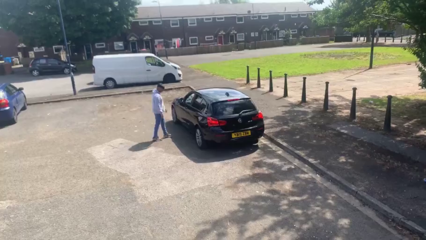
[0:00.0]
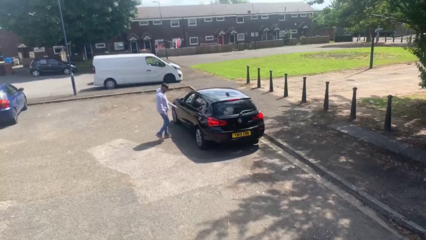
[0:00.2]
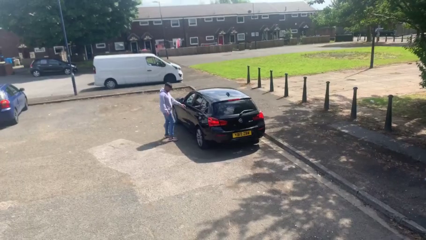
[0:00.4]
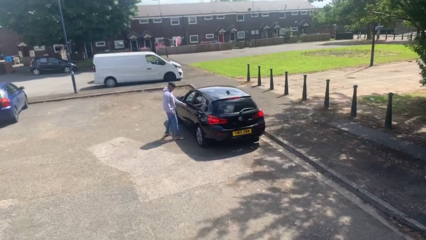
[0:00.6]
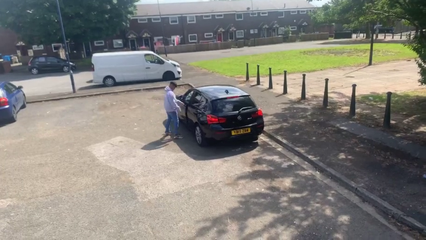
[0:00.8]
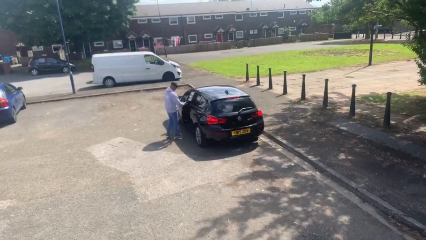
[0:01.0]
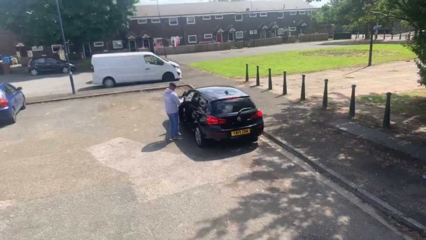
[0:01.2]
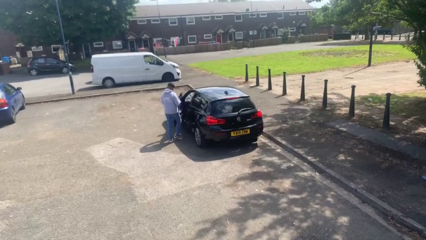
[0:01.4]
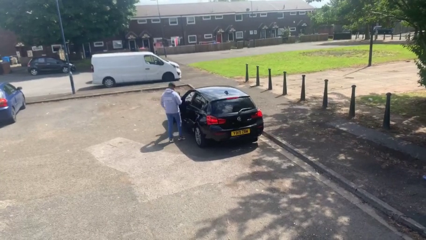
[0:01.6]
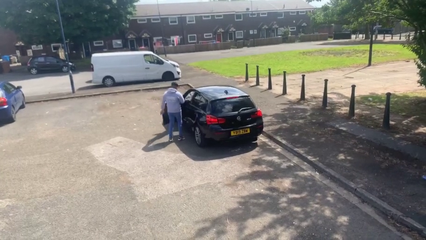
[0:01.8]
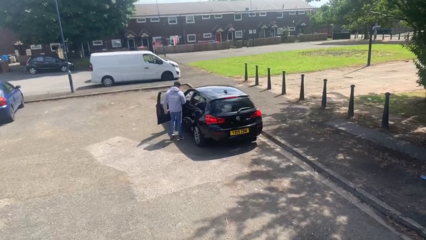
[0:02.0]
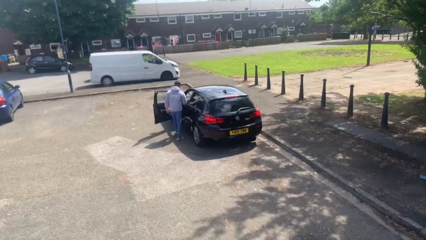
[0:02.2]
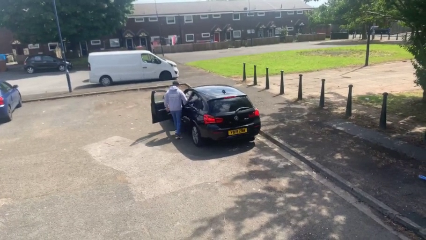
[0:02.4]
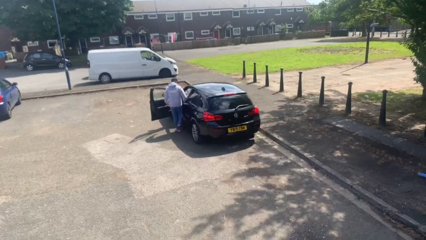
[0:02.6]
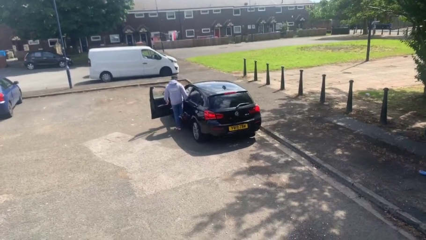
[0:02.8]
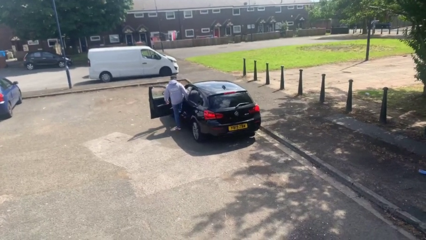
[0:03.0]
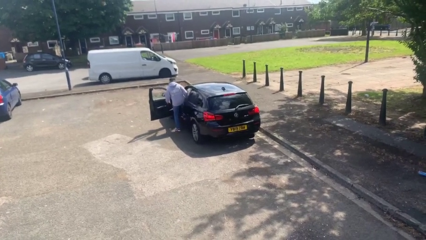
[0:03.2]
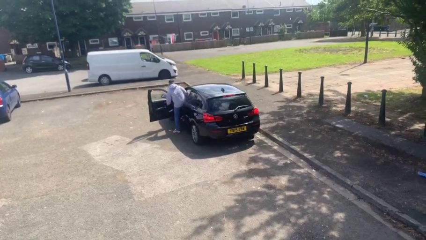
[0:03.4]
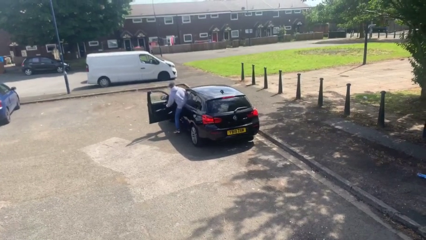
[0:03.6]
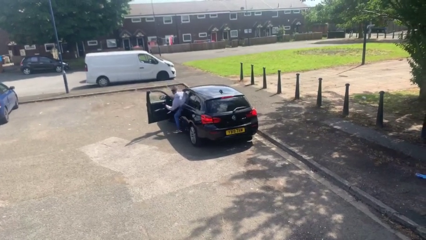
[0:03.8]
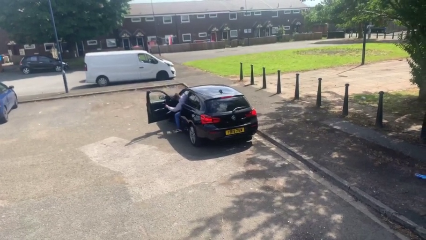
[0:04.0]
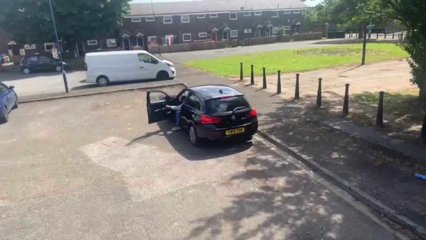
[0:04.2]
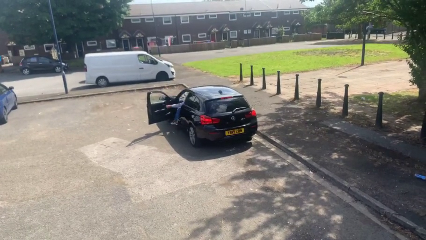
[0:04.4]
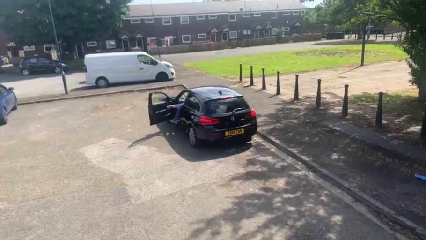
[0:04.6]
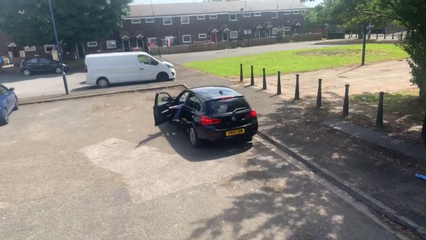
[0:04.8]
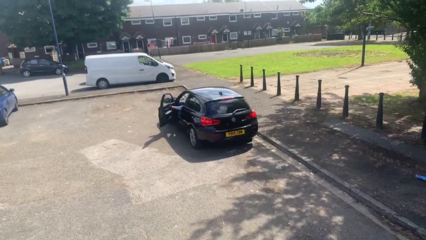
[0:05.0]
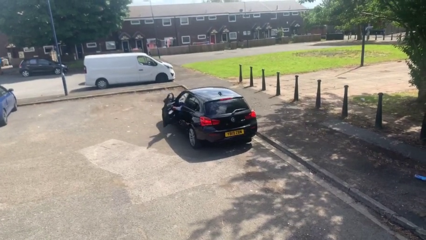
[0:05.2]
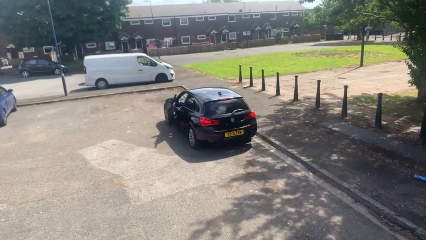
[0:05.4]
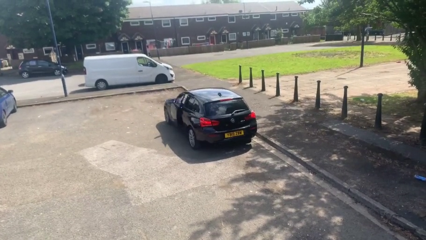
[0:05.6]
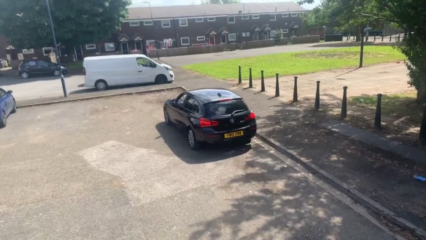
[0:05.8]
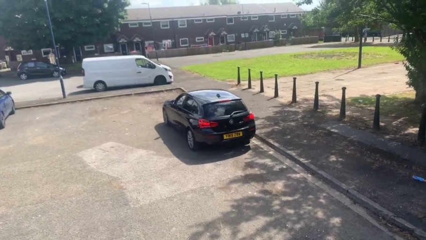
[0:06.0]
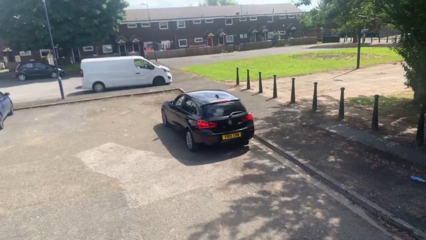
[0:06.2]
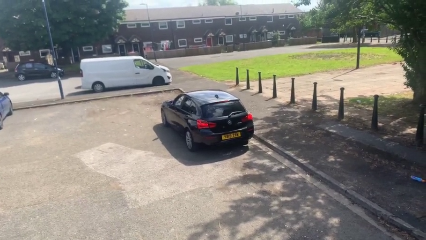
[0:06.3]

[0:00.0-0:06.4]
car picks up person

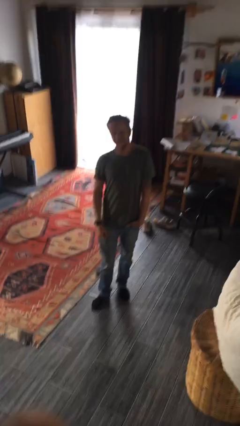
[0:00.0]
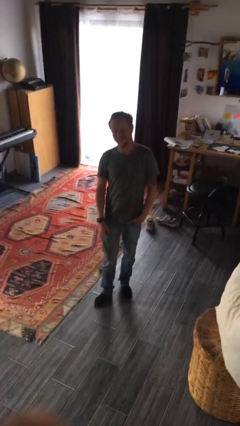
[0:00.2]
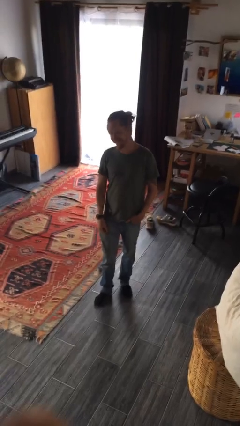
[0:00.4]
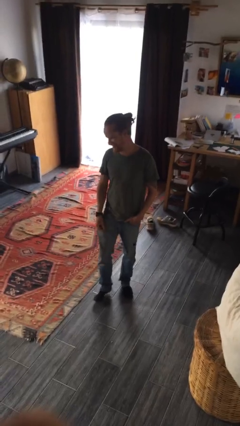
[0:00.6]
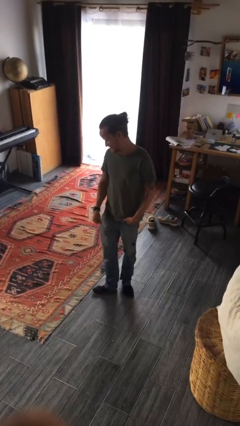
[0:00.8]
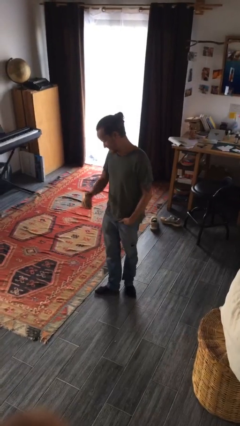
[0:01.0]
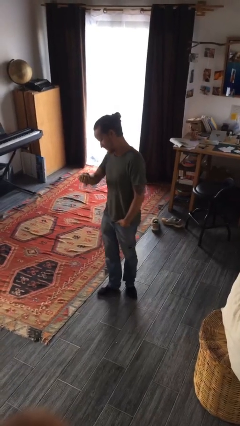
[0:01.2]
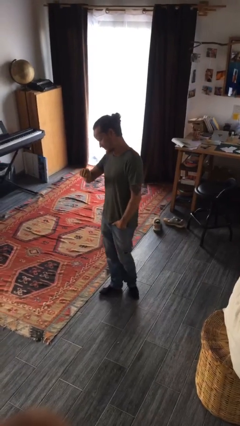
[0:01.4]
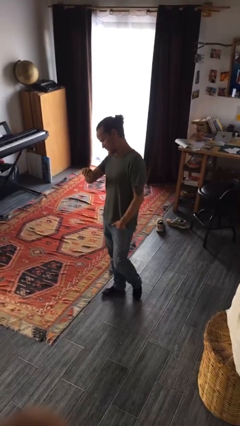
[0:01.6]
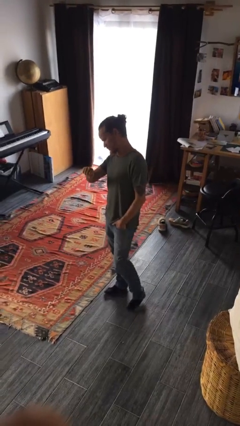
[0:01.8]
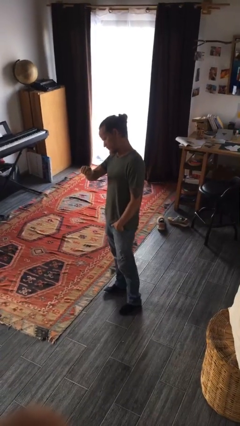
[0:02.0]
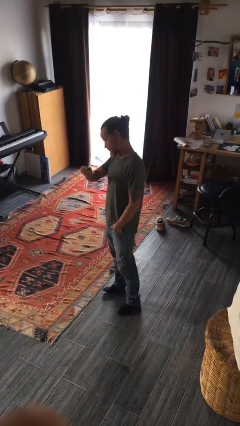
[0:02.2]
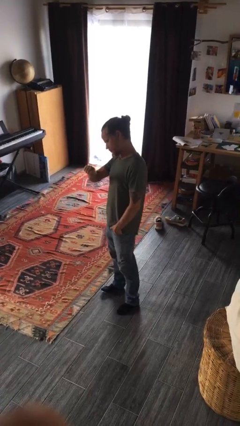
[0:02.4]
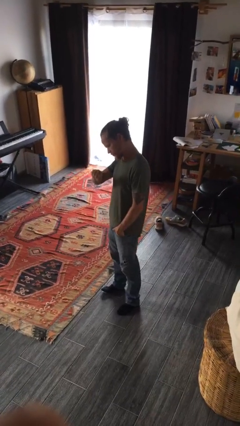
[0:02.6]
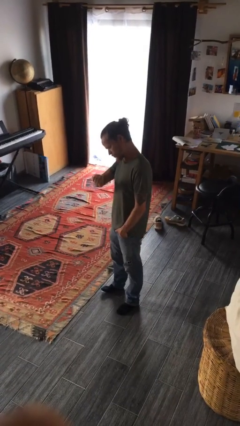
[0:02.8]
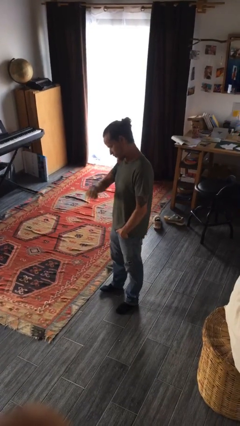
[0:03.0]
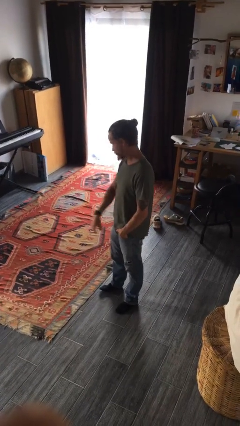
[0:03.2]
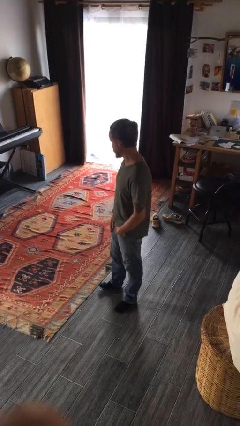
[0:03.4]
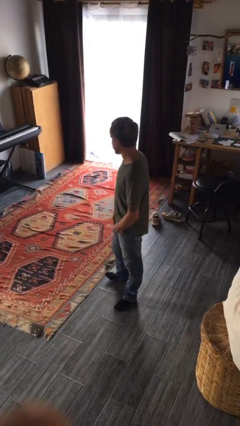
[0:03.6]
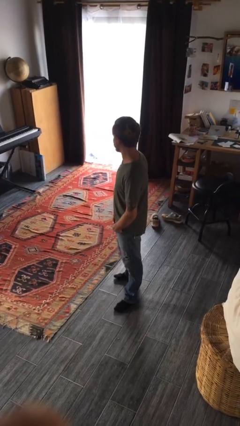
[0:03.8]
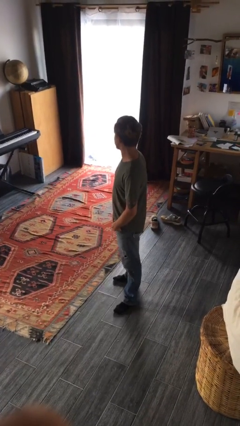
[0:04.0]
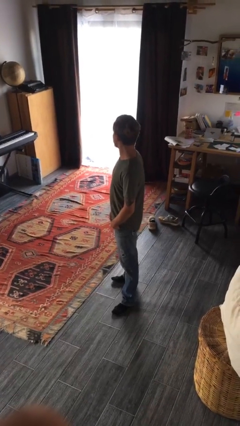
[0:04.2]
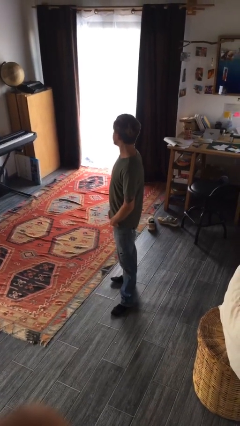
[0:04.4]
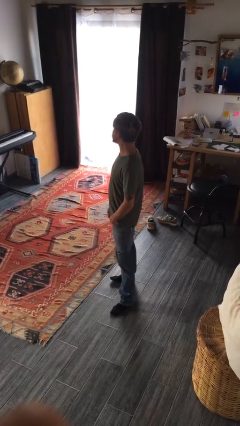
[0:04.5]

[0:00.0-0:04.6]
person looks at wristwatch

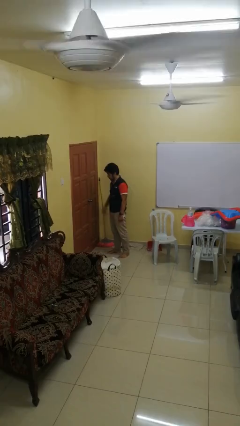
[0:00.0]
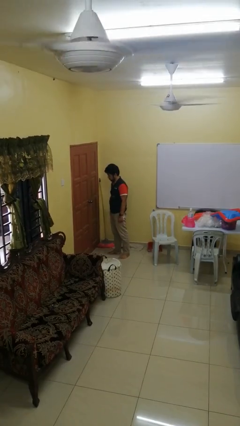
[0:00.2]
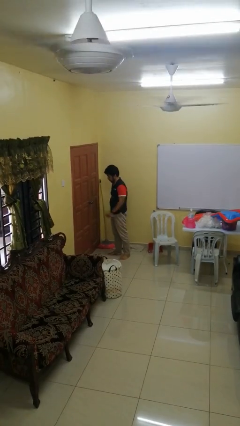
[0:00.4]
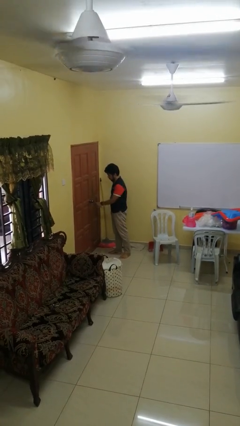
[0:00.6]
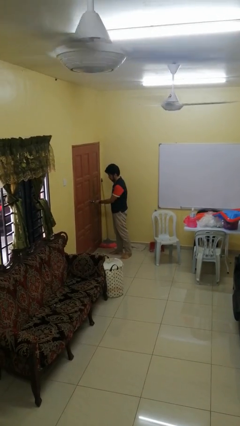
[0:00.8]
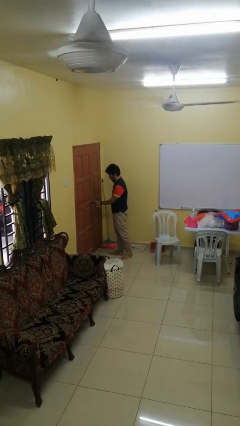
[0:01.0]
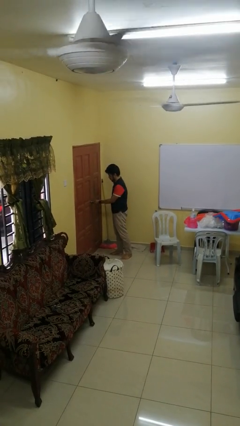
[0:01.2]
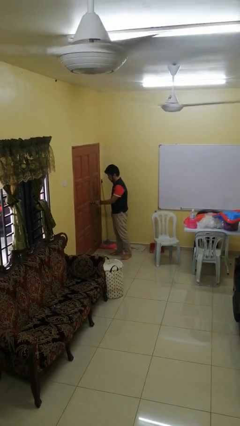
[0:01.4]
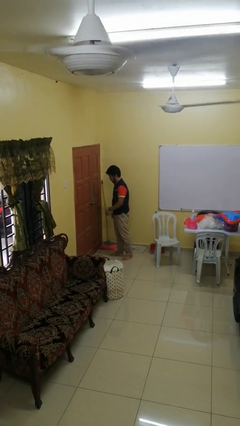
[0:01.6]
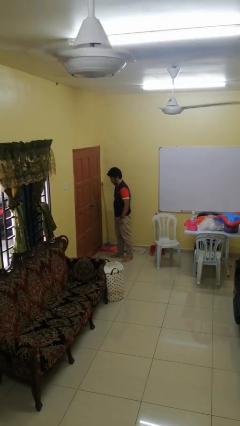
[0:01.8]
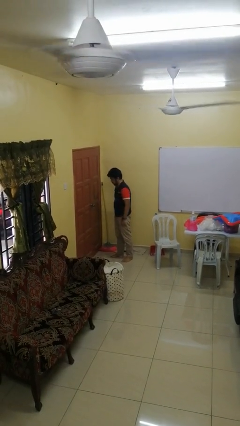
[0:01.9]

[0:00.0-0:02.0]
person locks door with keys

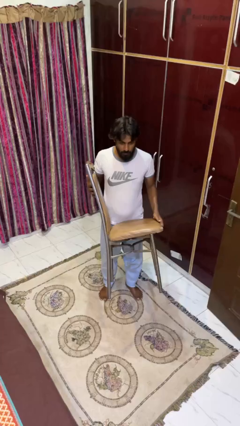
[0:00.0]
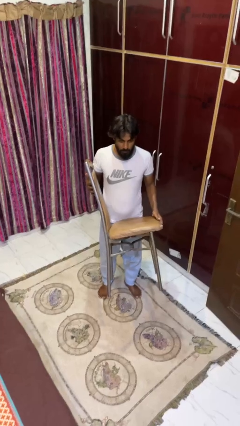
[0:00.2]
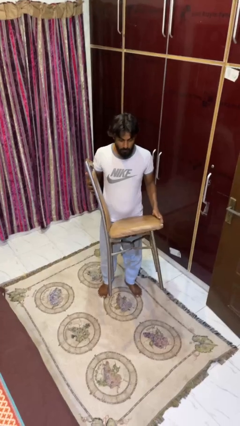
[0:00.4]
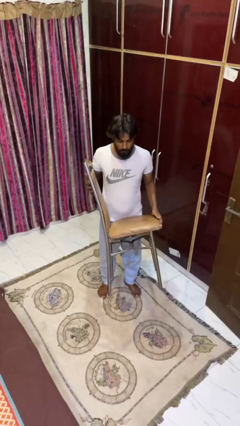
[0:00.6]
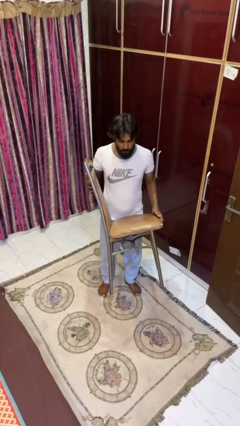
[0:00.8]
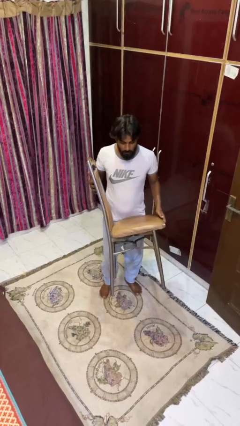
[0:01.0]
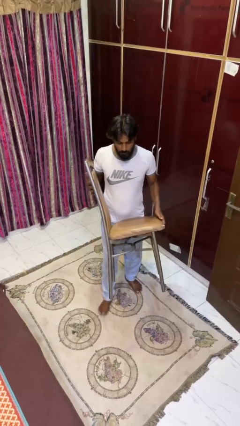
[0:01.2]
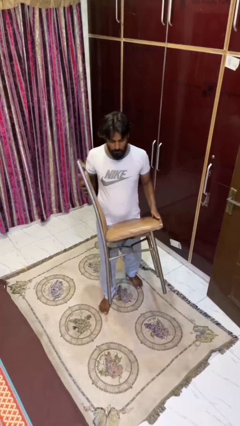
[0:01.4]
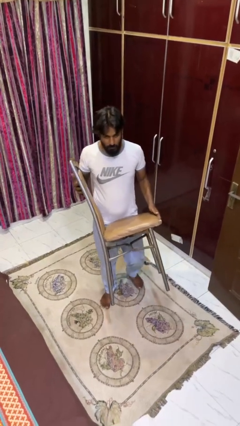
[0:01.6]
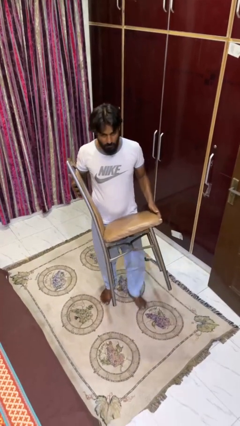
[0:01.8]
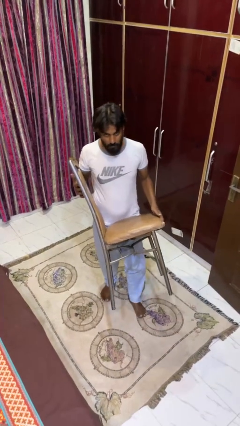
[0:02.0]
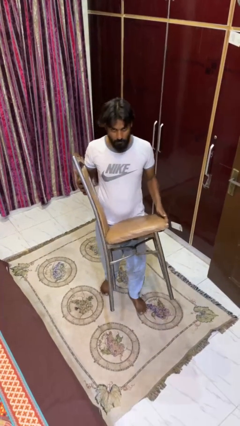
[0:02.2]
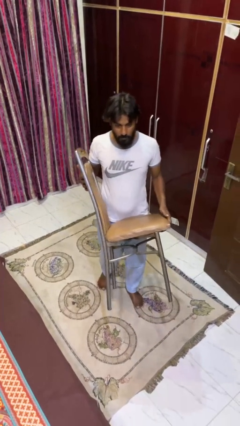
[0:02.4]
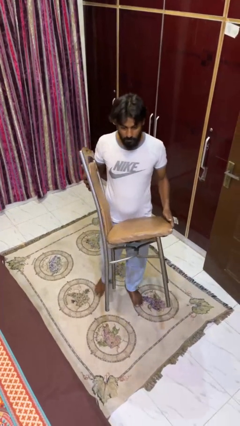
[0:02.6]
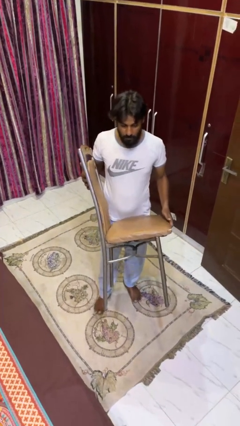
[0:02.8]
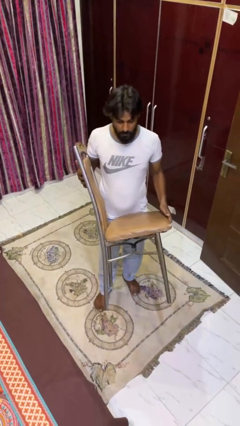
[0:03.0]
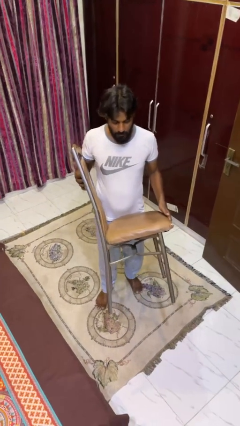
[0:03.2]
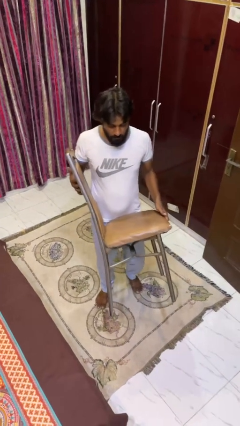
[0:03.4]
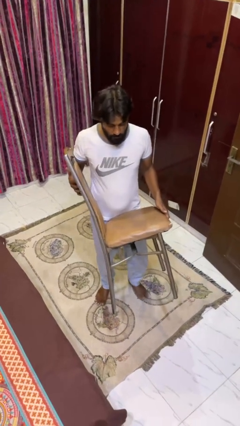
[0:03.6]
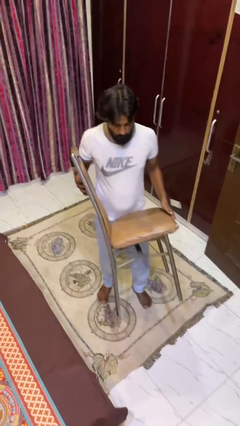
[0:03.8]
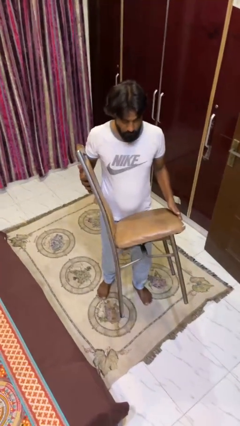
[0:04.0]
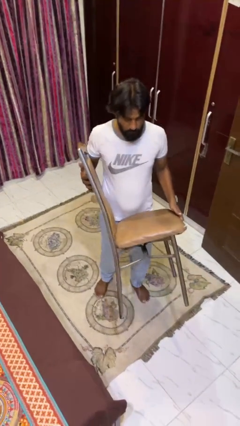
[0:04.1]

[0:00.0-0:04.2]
person carries furniture

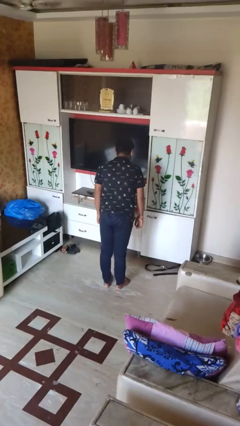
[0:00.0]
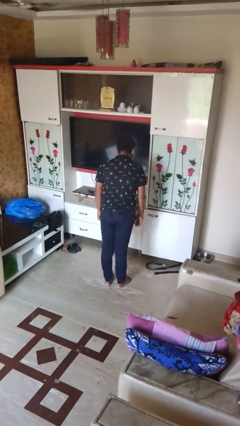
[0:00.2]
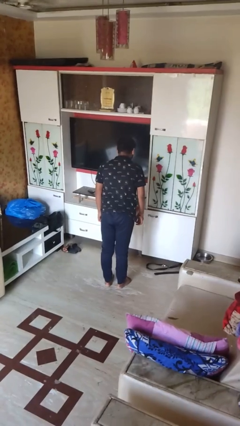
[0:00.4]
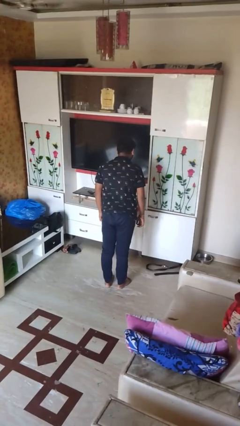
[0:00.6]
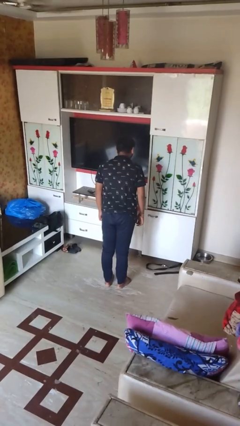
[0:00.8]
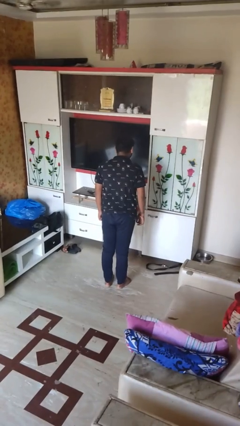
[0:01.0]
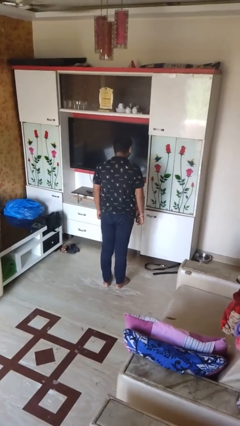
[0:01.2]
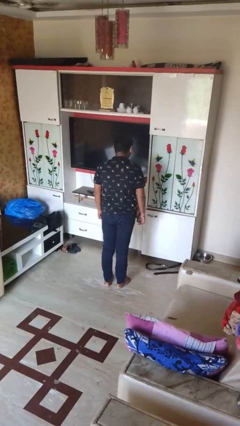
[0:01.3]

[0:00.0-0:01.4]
person wiggles hips
